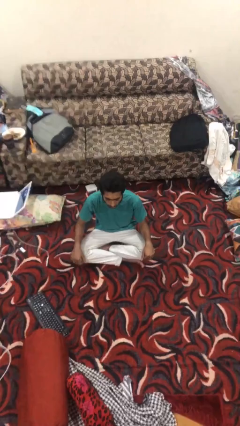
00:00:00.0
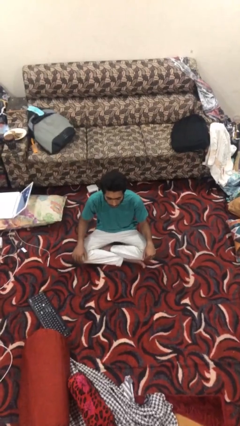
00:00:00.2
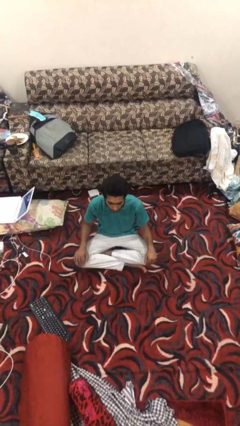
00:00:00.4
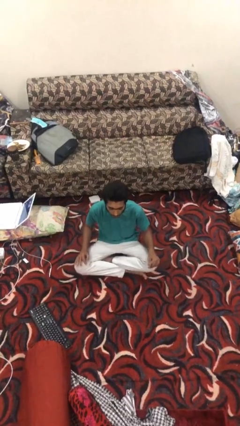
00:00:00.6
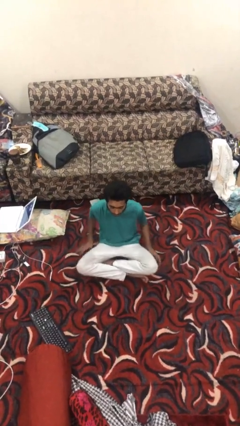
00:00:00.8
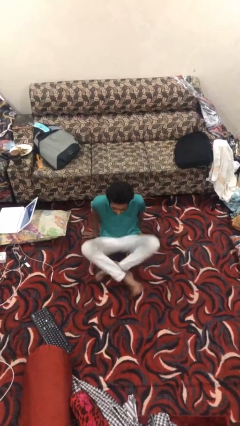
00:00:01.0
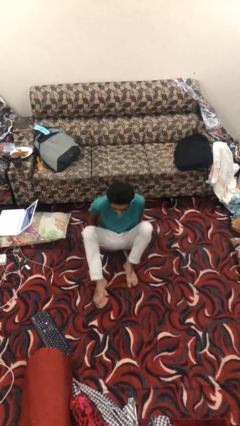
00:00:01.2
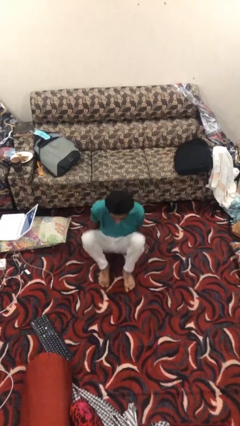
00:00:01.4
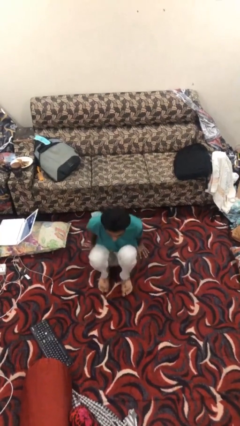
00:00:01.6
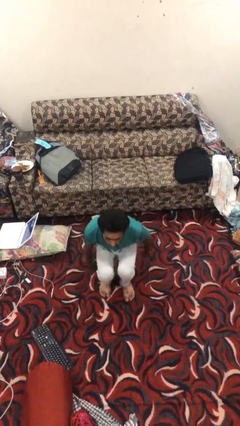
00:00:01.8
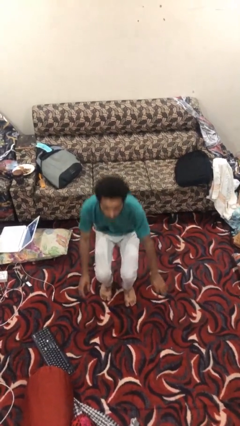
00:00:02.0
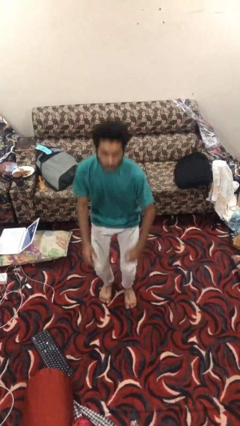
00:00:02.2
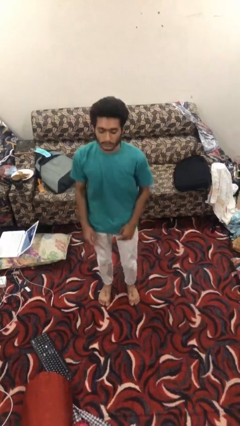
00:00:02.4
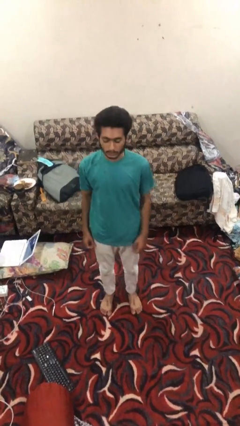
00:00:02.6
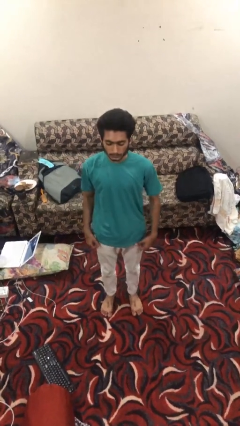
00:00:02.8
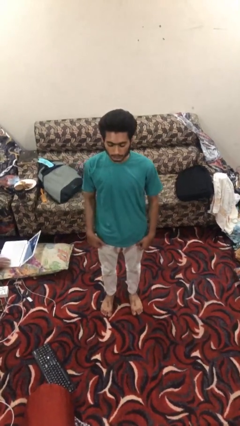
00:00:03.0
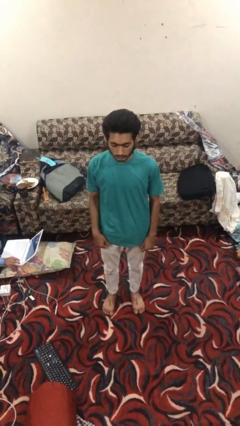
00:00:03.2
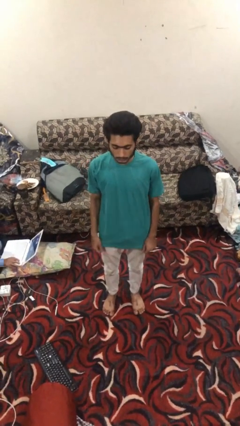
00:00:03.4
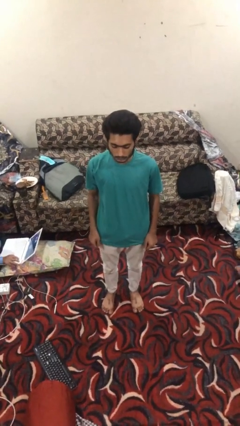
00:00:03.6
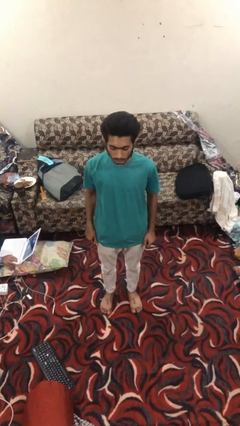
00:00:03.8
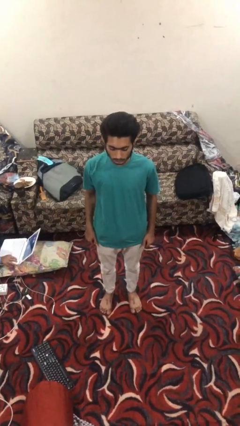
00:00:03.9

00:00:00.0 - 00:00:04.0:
person stands up from floor

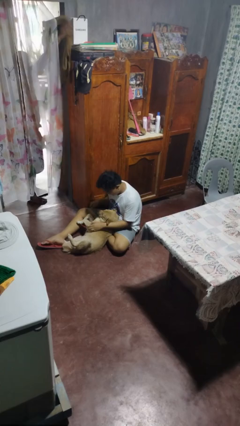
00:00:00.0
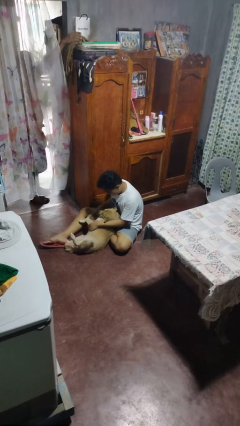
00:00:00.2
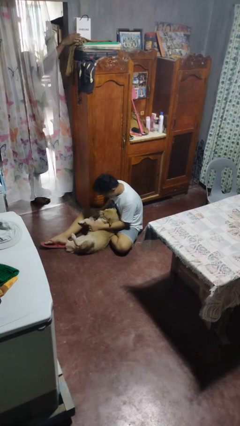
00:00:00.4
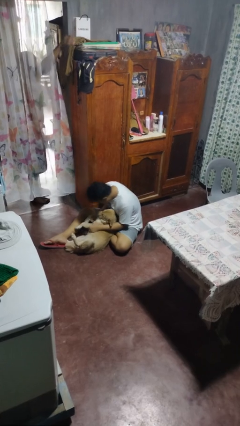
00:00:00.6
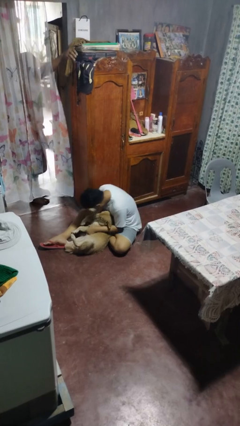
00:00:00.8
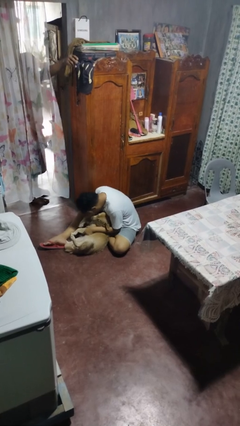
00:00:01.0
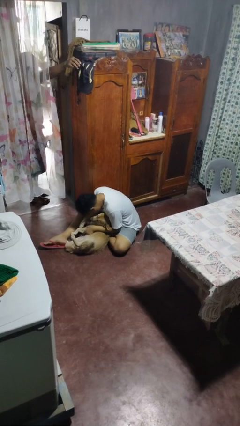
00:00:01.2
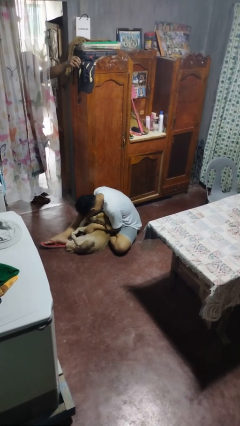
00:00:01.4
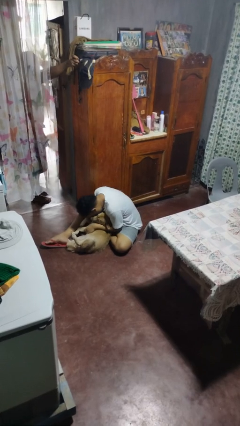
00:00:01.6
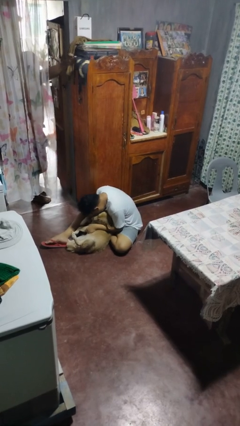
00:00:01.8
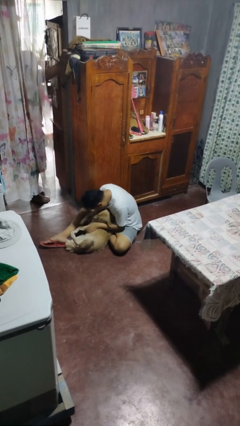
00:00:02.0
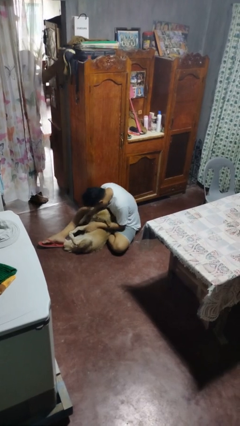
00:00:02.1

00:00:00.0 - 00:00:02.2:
person hugs dog

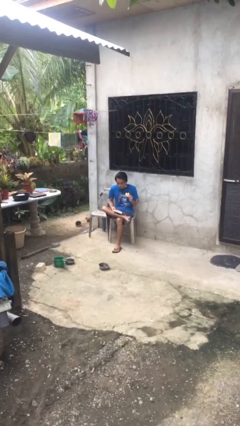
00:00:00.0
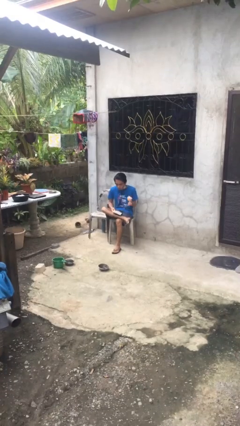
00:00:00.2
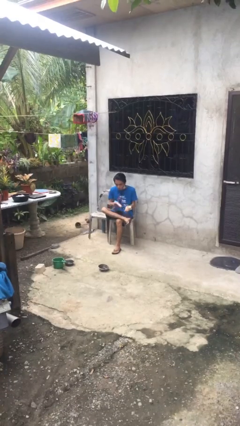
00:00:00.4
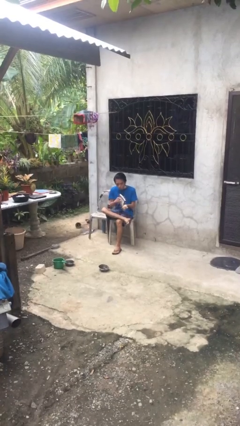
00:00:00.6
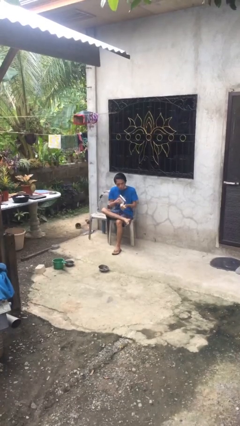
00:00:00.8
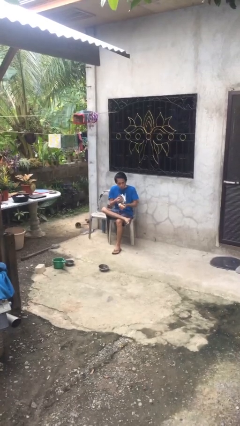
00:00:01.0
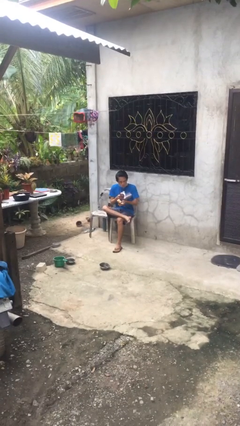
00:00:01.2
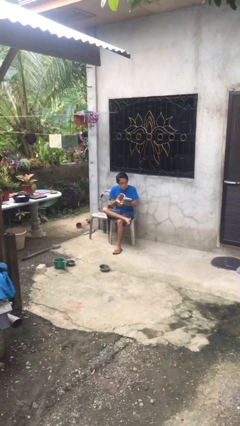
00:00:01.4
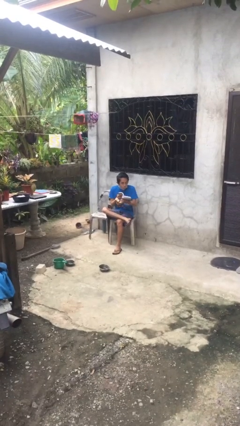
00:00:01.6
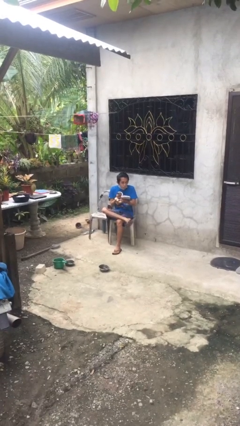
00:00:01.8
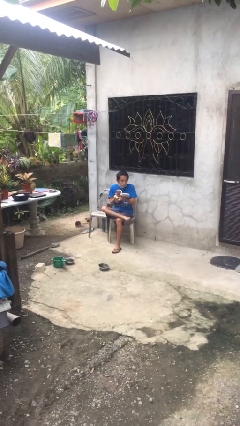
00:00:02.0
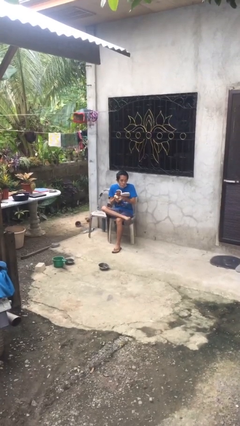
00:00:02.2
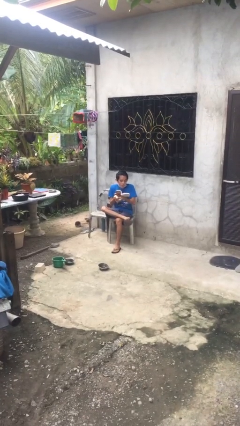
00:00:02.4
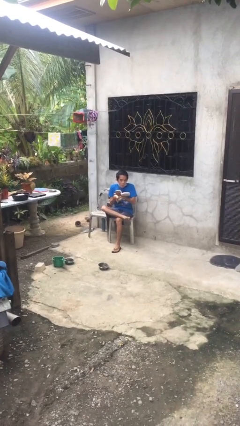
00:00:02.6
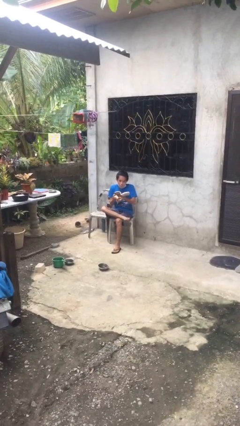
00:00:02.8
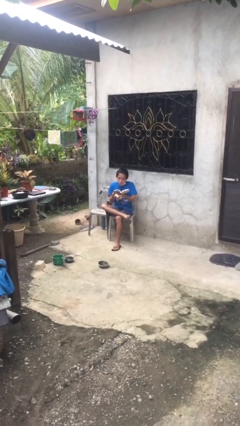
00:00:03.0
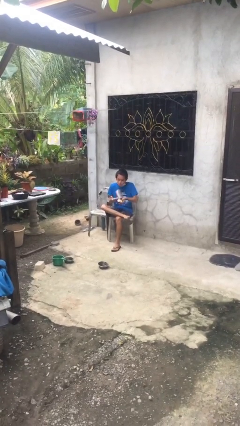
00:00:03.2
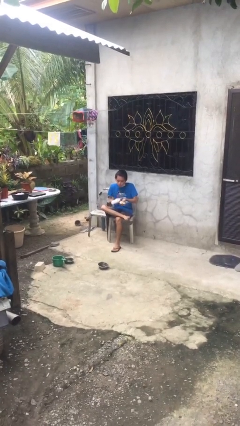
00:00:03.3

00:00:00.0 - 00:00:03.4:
person reads document

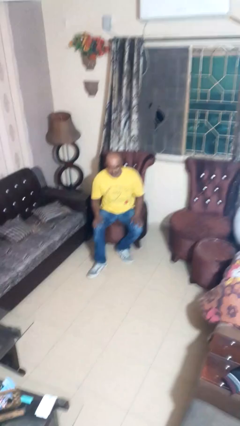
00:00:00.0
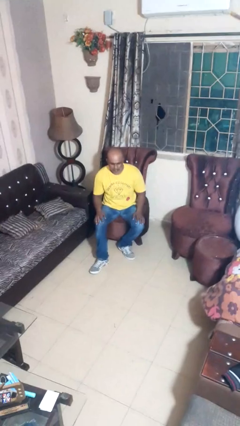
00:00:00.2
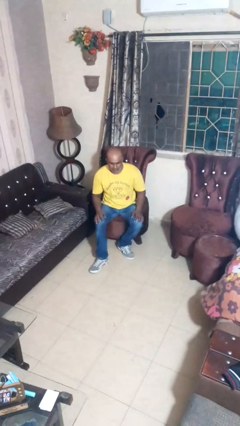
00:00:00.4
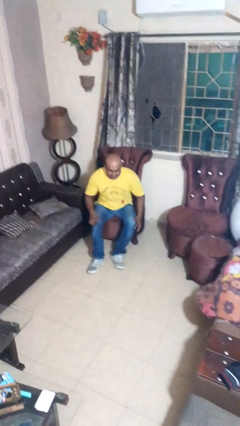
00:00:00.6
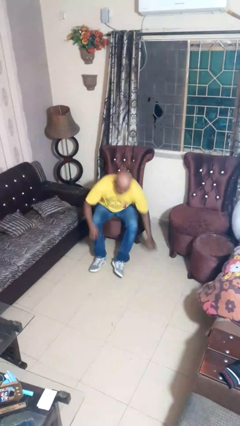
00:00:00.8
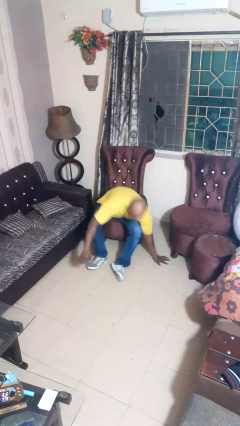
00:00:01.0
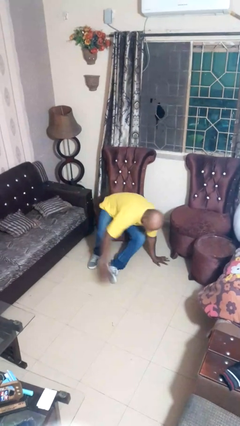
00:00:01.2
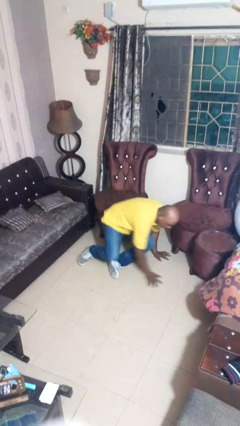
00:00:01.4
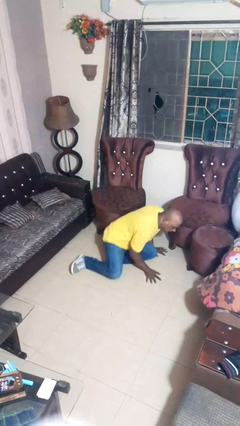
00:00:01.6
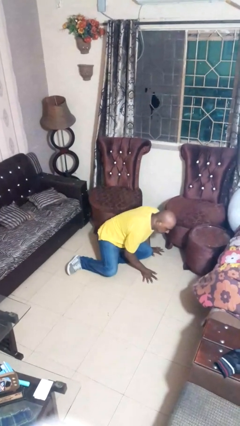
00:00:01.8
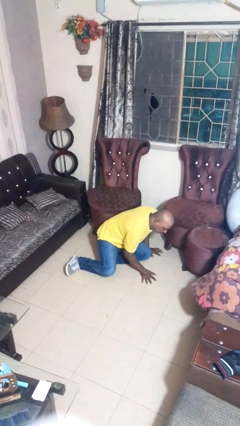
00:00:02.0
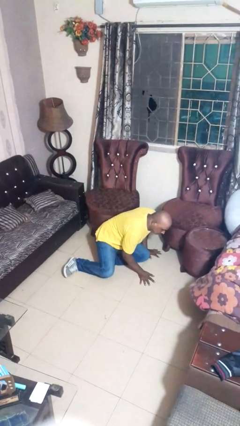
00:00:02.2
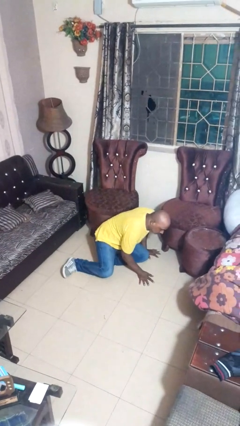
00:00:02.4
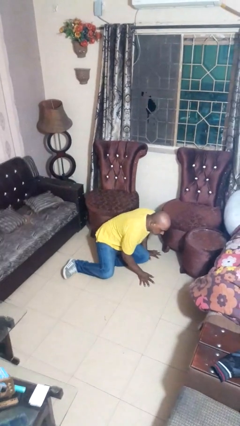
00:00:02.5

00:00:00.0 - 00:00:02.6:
person falls from chair

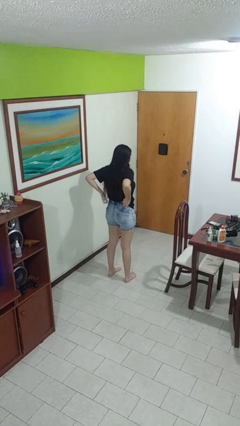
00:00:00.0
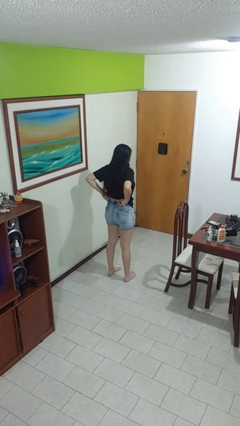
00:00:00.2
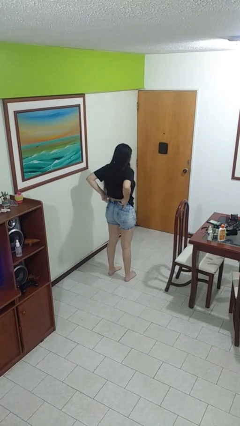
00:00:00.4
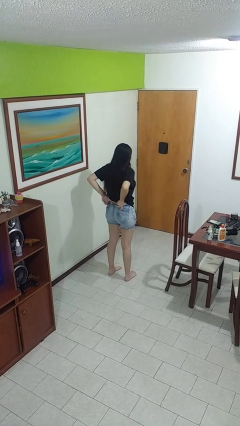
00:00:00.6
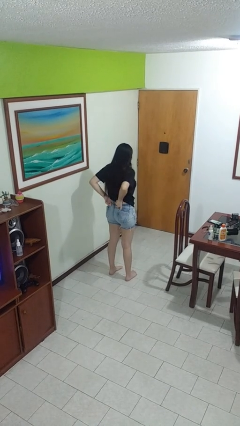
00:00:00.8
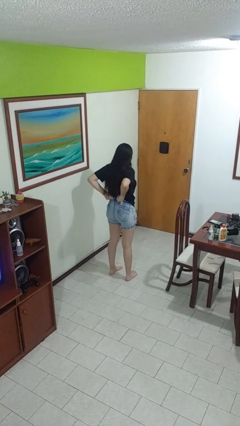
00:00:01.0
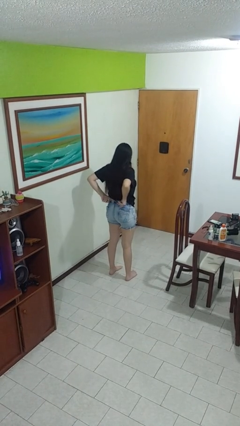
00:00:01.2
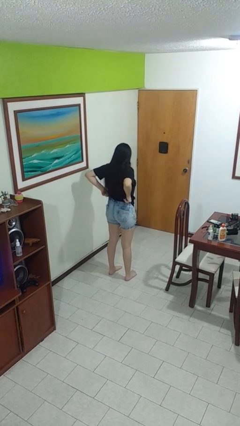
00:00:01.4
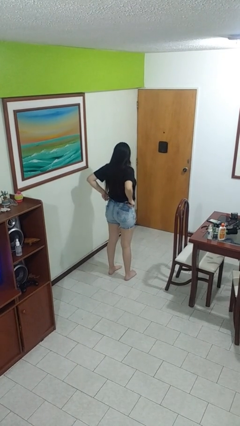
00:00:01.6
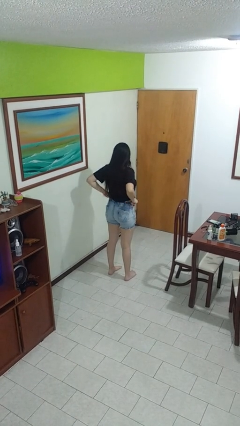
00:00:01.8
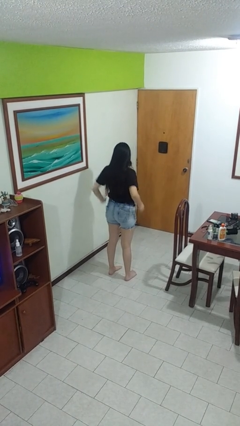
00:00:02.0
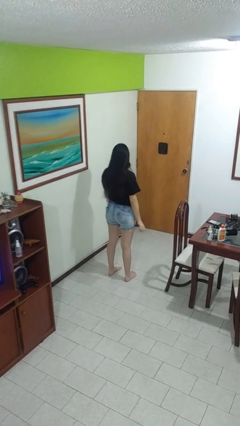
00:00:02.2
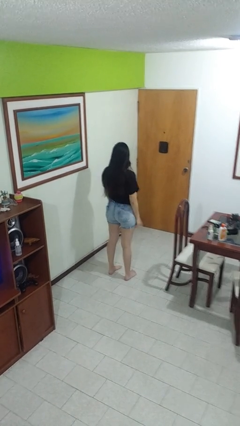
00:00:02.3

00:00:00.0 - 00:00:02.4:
person hikes up pants

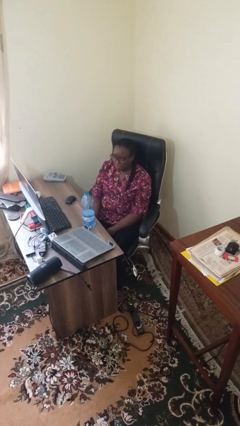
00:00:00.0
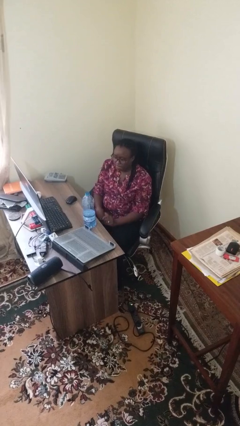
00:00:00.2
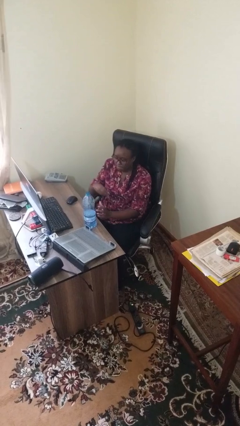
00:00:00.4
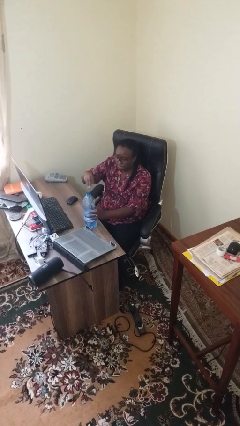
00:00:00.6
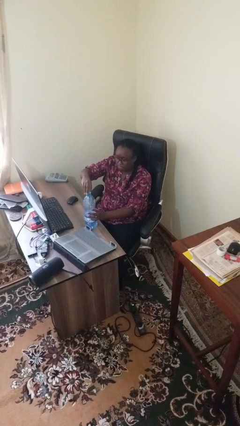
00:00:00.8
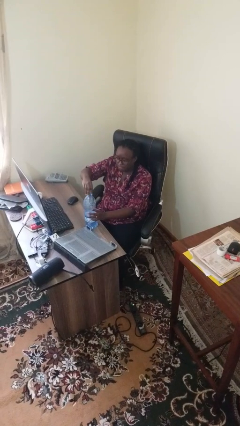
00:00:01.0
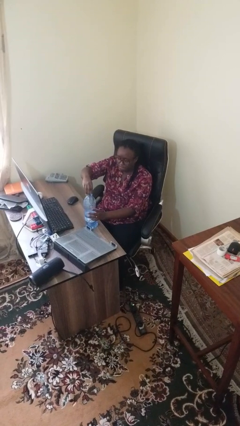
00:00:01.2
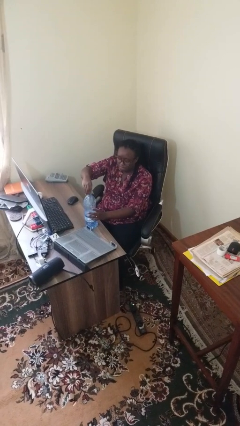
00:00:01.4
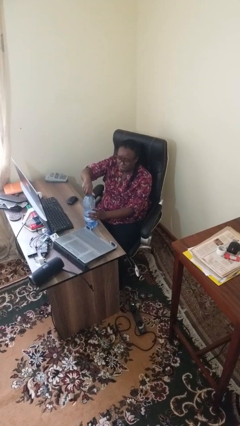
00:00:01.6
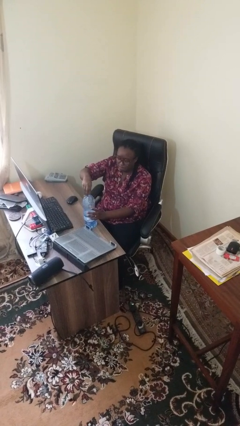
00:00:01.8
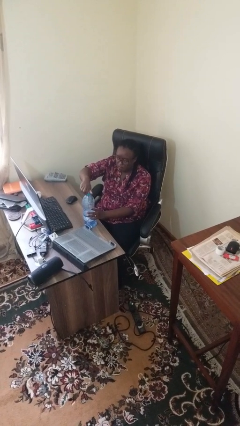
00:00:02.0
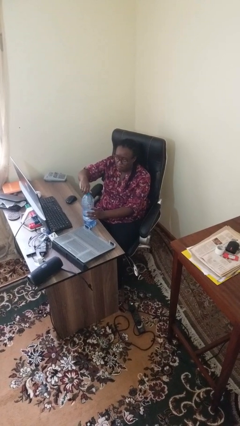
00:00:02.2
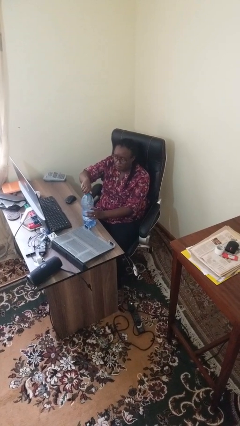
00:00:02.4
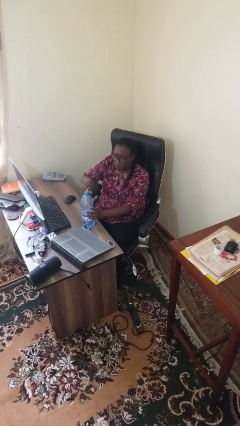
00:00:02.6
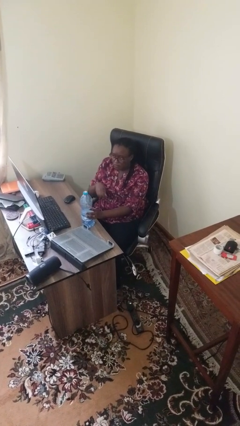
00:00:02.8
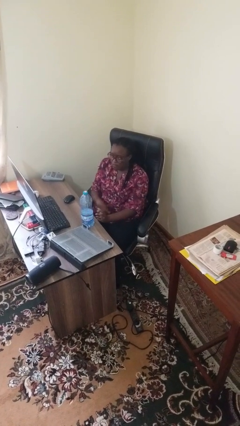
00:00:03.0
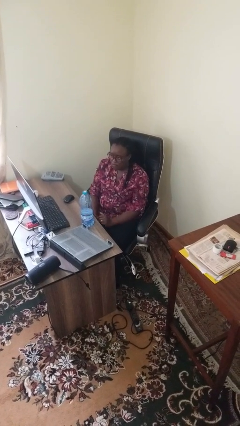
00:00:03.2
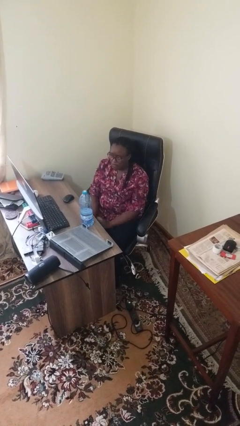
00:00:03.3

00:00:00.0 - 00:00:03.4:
person screws lid to bottle
